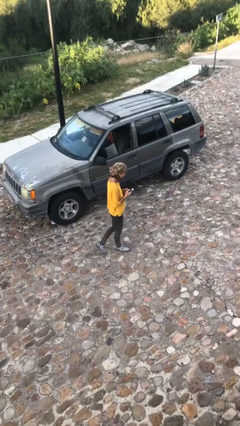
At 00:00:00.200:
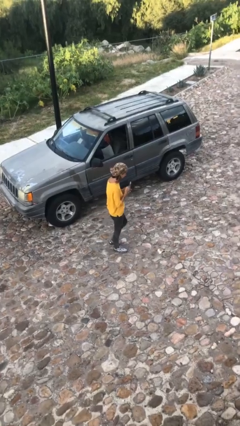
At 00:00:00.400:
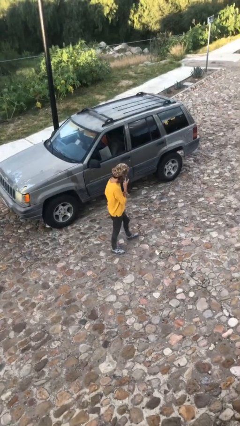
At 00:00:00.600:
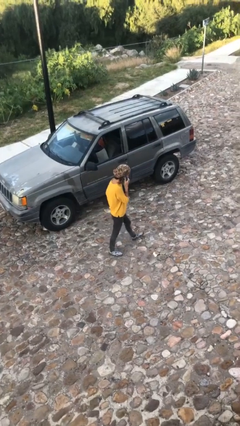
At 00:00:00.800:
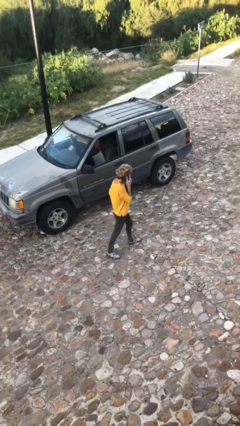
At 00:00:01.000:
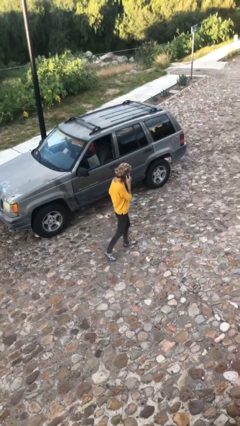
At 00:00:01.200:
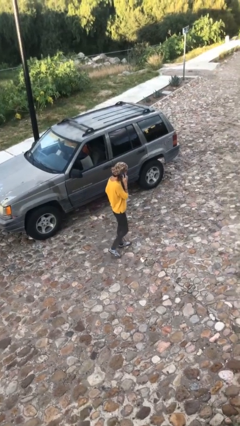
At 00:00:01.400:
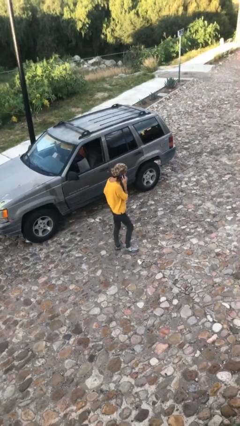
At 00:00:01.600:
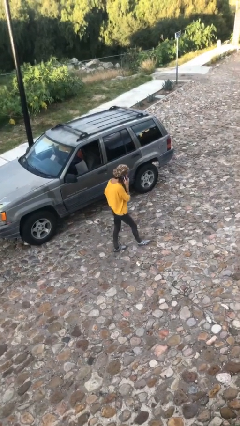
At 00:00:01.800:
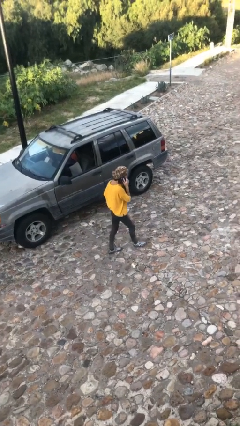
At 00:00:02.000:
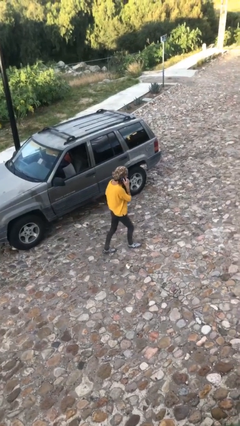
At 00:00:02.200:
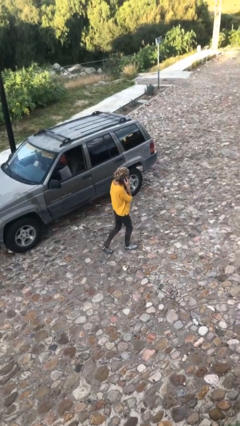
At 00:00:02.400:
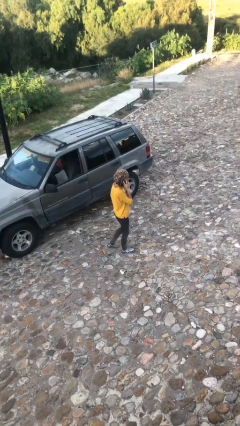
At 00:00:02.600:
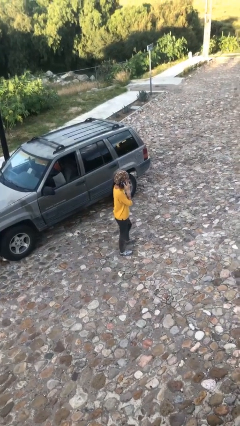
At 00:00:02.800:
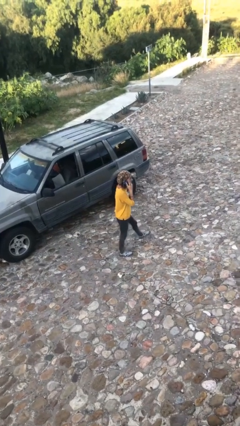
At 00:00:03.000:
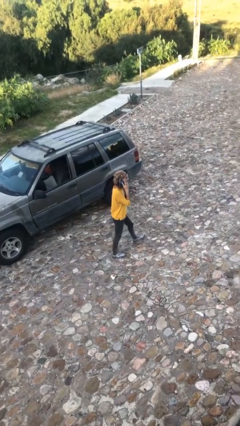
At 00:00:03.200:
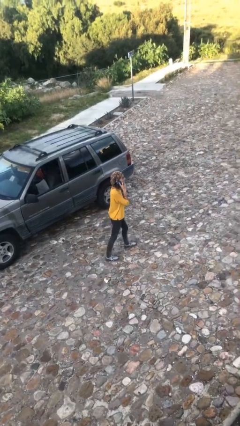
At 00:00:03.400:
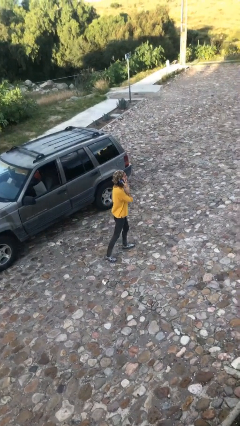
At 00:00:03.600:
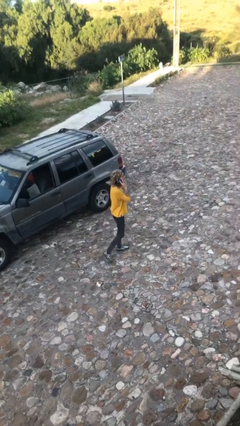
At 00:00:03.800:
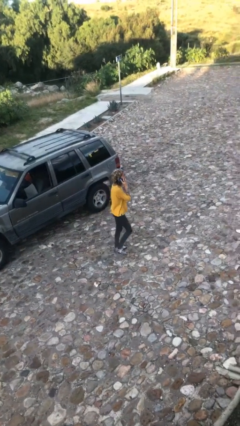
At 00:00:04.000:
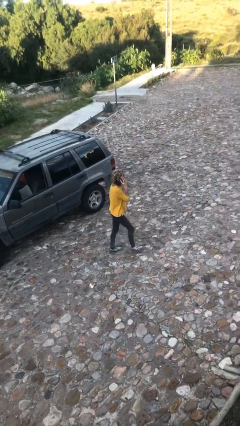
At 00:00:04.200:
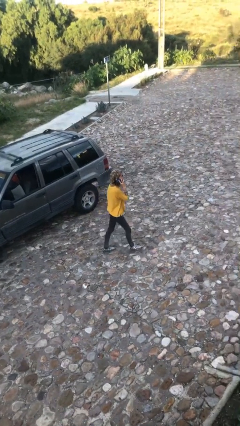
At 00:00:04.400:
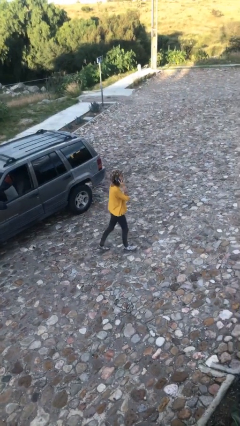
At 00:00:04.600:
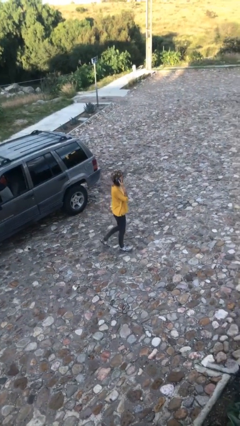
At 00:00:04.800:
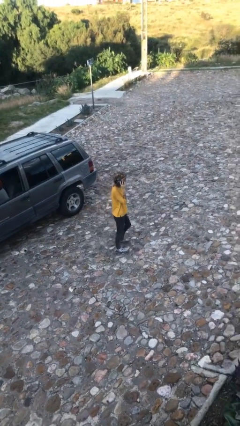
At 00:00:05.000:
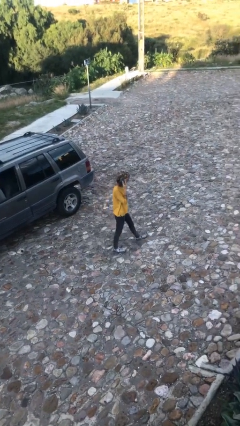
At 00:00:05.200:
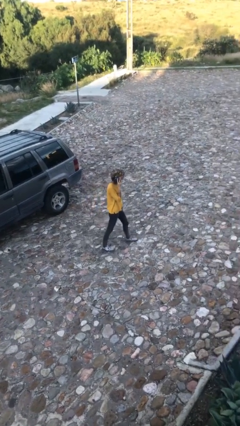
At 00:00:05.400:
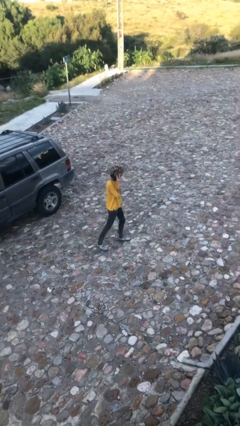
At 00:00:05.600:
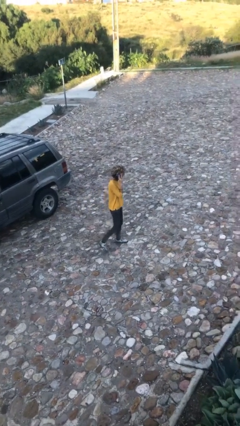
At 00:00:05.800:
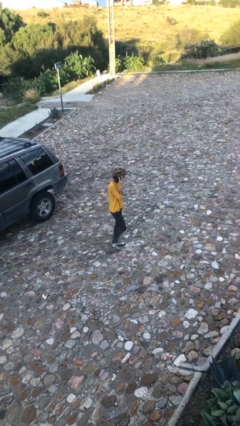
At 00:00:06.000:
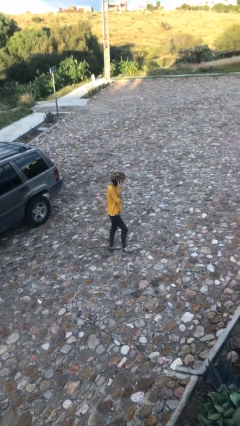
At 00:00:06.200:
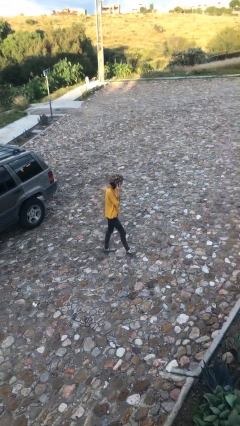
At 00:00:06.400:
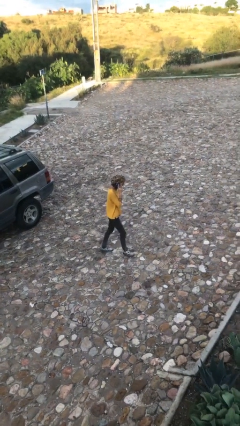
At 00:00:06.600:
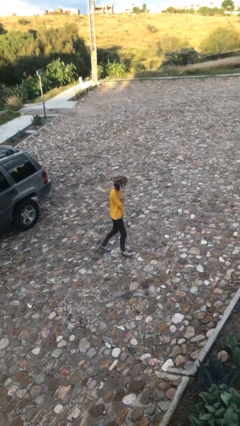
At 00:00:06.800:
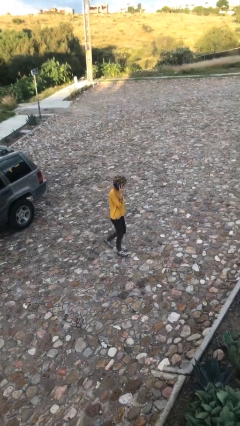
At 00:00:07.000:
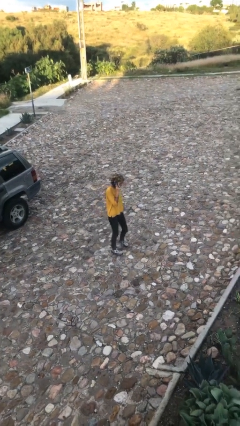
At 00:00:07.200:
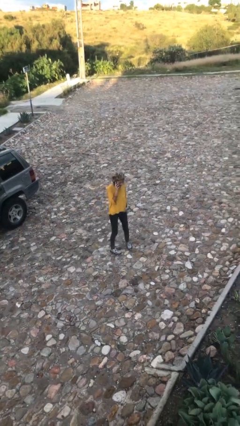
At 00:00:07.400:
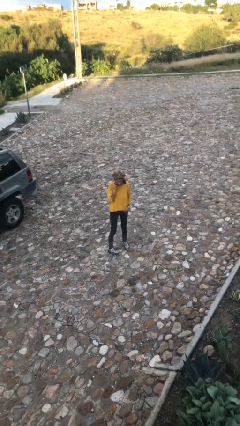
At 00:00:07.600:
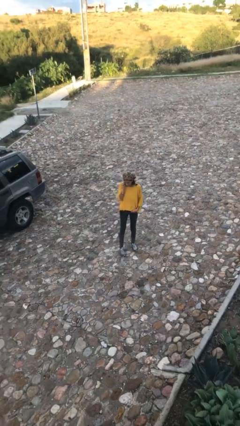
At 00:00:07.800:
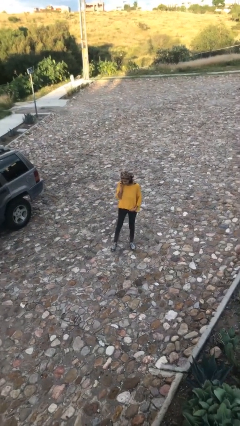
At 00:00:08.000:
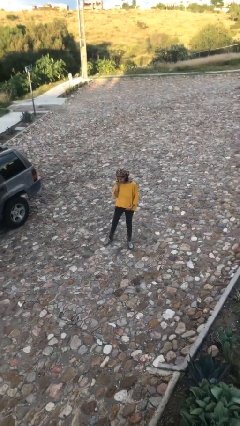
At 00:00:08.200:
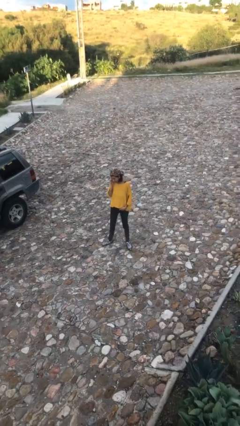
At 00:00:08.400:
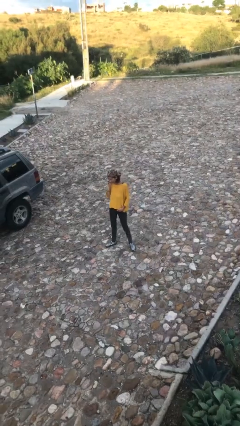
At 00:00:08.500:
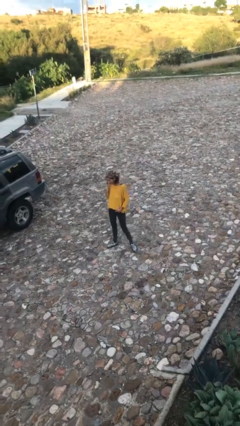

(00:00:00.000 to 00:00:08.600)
person talks on phone

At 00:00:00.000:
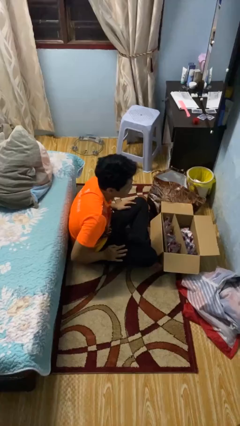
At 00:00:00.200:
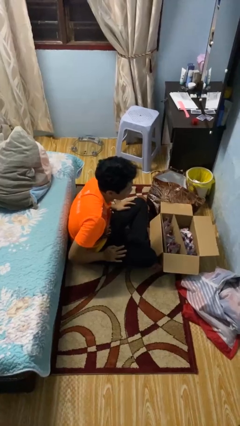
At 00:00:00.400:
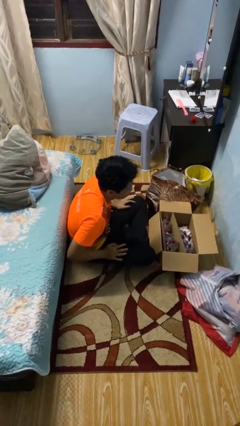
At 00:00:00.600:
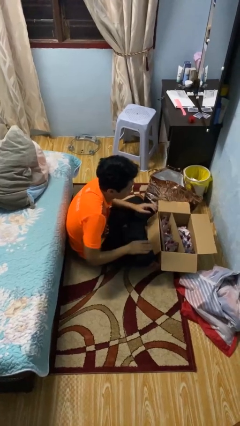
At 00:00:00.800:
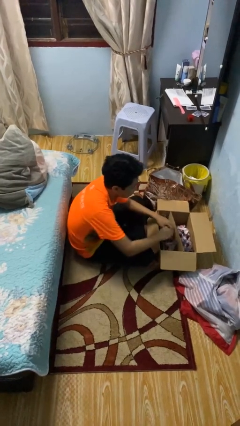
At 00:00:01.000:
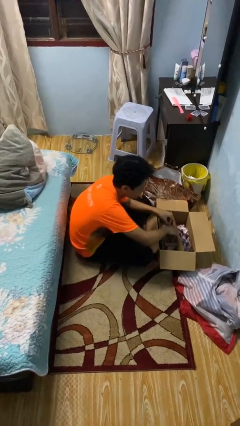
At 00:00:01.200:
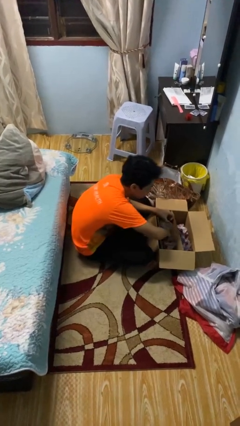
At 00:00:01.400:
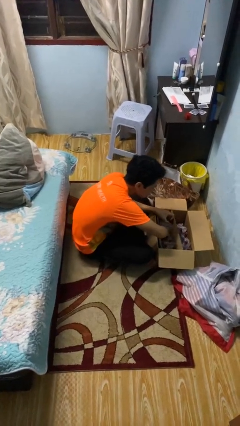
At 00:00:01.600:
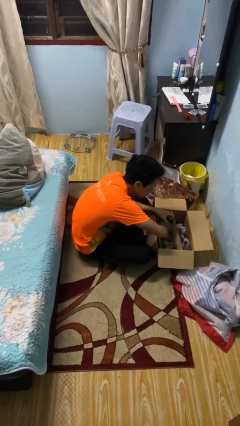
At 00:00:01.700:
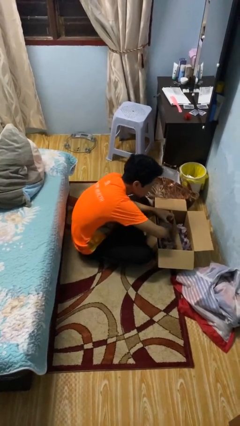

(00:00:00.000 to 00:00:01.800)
person searches in bag

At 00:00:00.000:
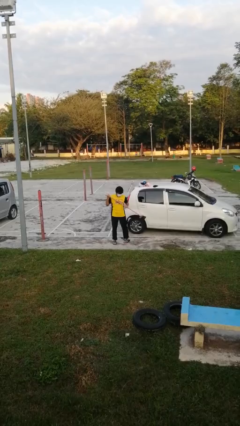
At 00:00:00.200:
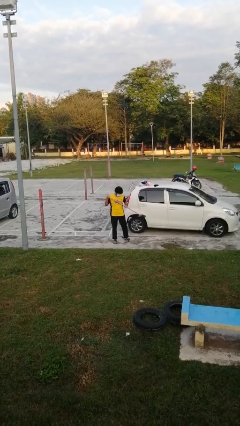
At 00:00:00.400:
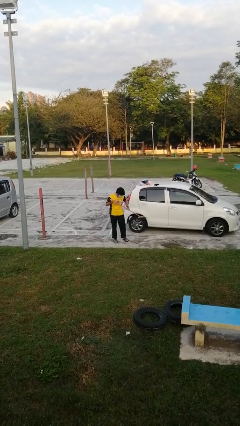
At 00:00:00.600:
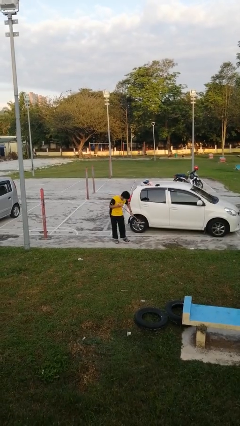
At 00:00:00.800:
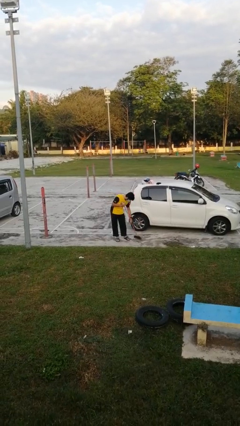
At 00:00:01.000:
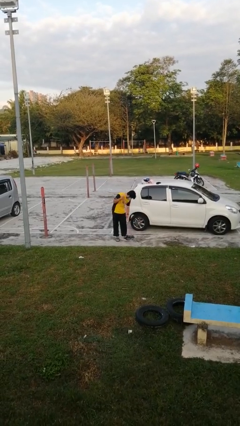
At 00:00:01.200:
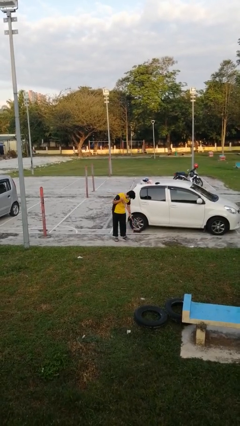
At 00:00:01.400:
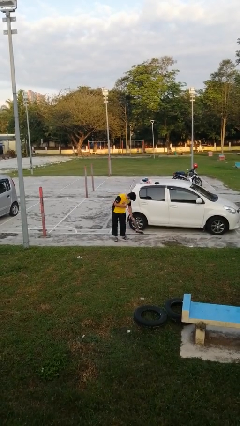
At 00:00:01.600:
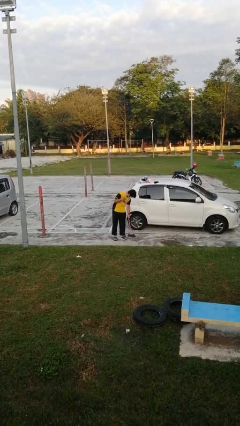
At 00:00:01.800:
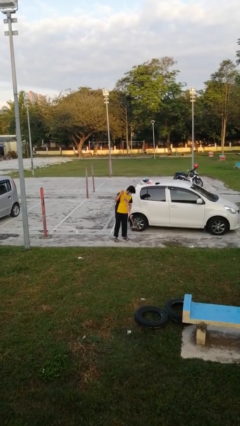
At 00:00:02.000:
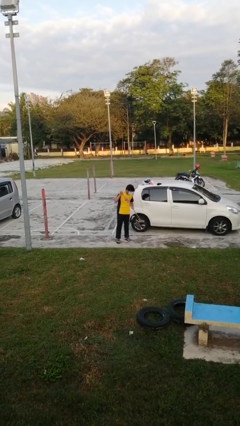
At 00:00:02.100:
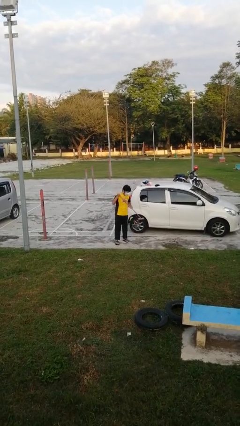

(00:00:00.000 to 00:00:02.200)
person sweeps floor

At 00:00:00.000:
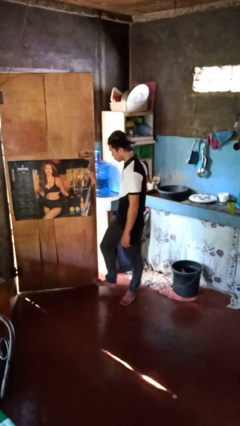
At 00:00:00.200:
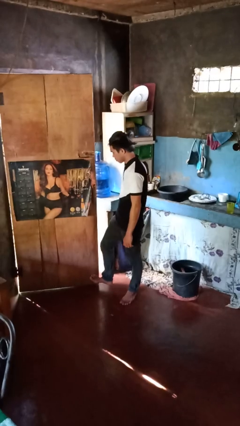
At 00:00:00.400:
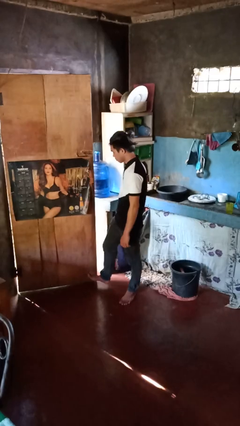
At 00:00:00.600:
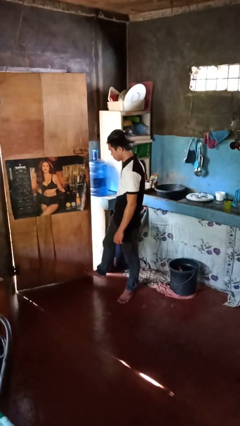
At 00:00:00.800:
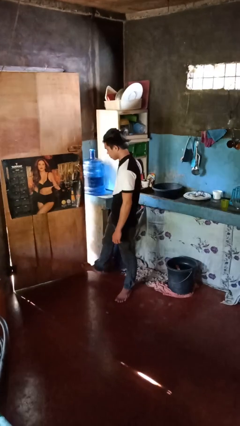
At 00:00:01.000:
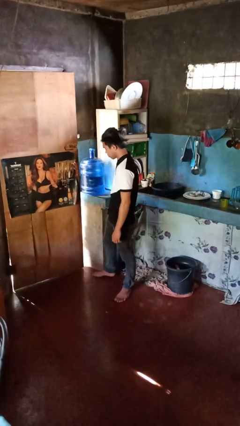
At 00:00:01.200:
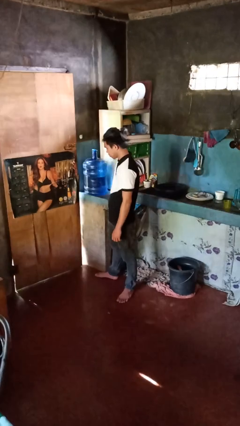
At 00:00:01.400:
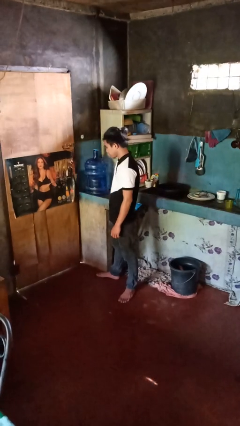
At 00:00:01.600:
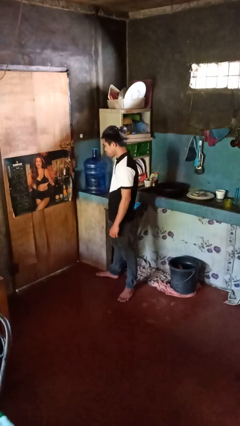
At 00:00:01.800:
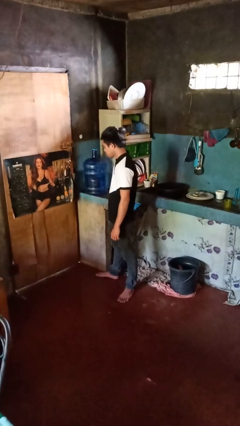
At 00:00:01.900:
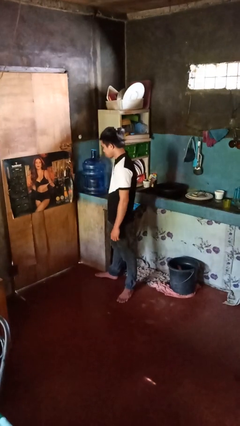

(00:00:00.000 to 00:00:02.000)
person closes door with foot

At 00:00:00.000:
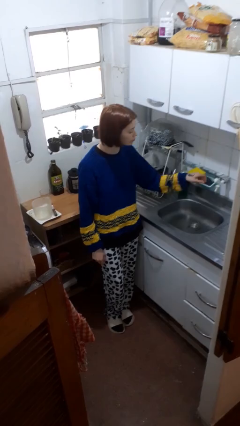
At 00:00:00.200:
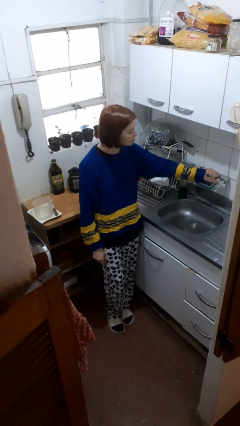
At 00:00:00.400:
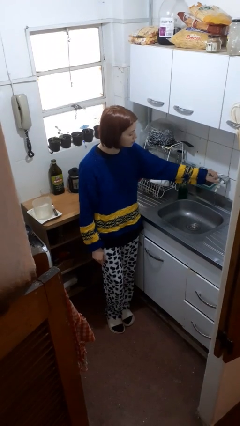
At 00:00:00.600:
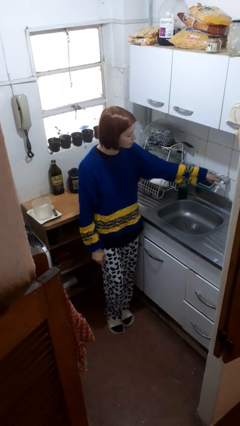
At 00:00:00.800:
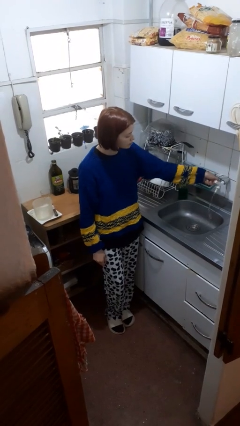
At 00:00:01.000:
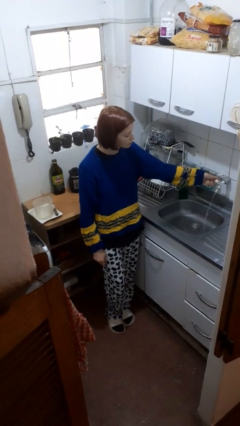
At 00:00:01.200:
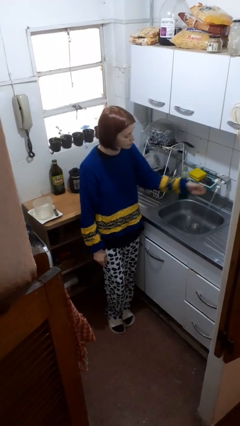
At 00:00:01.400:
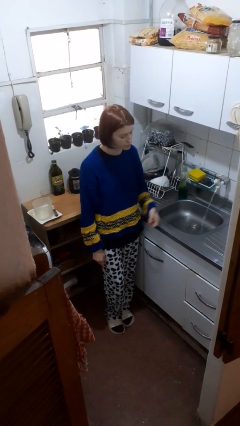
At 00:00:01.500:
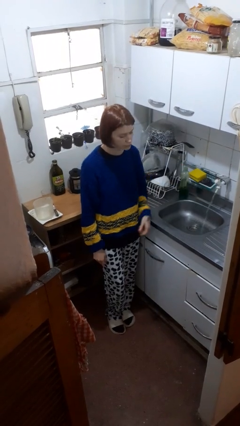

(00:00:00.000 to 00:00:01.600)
person turns on faucet

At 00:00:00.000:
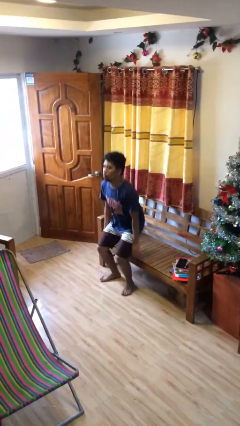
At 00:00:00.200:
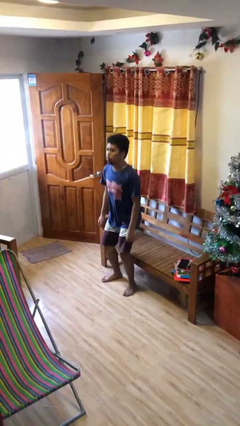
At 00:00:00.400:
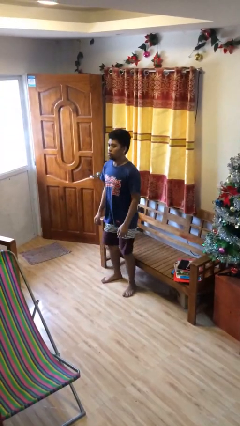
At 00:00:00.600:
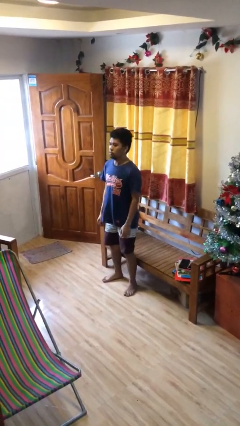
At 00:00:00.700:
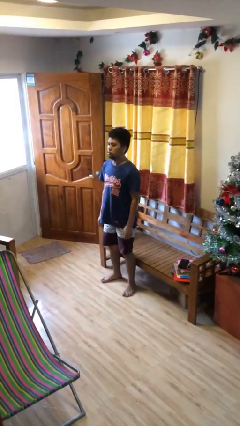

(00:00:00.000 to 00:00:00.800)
person stands up
